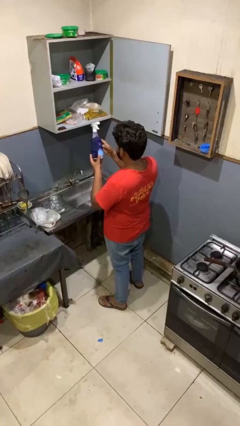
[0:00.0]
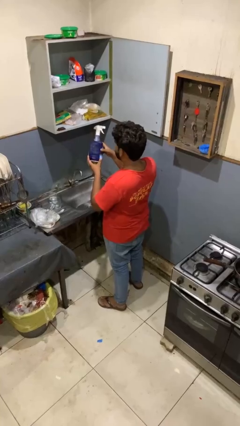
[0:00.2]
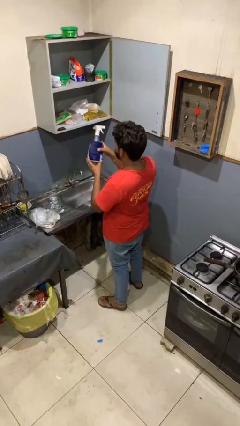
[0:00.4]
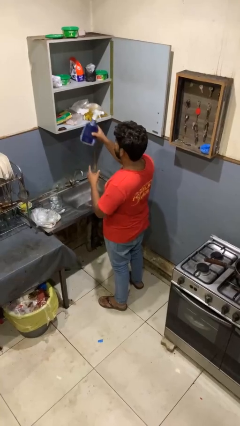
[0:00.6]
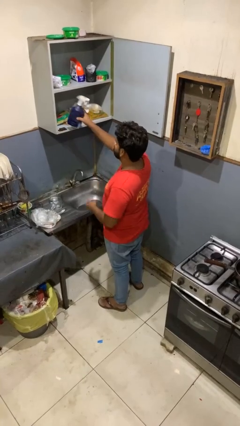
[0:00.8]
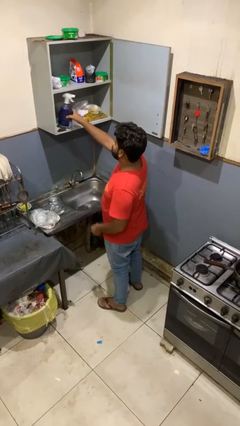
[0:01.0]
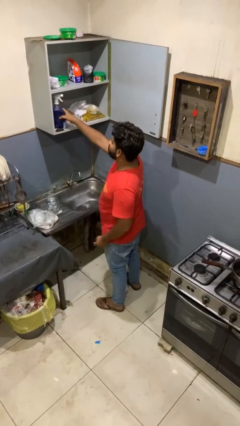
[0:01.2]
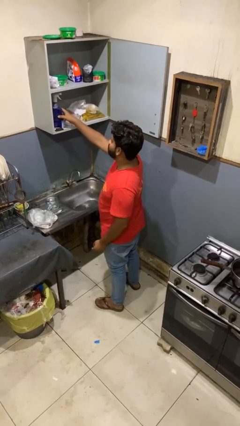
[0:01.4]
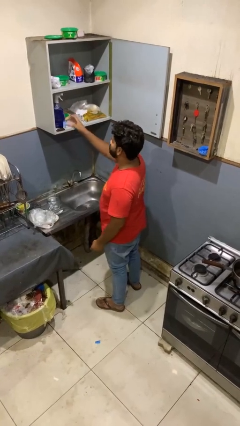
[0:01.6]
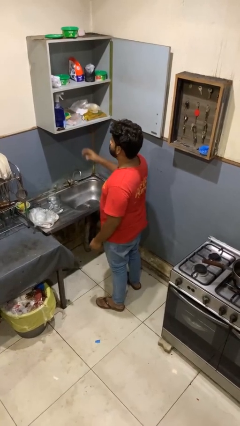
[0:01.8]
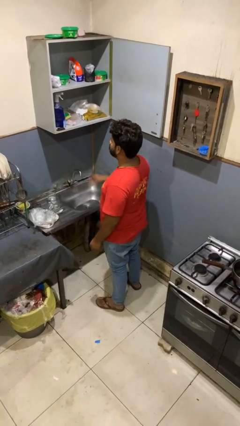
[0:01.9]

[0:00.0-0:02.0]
person puts down object into cabinet

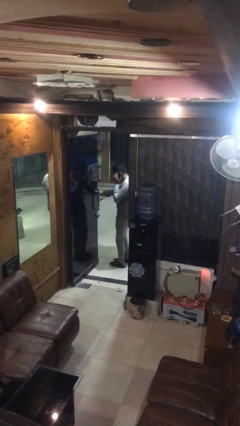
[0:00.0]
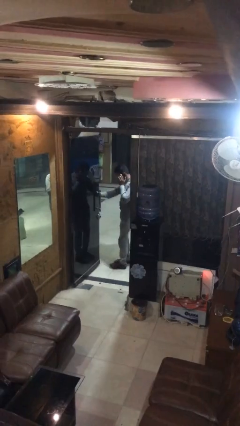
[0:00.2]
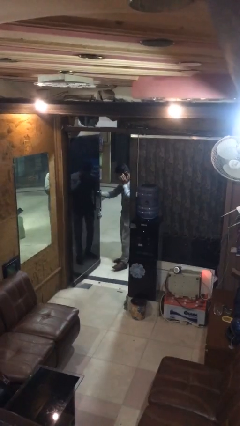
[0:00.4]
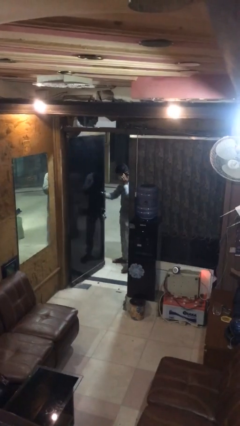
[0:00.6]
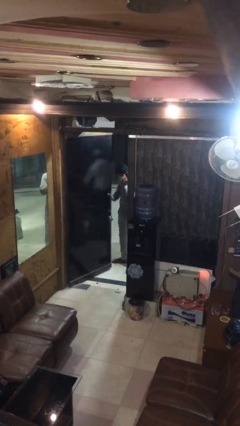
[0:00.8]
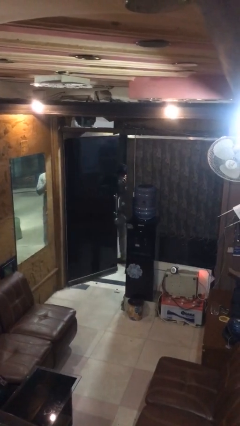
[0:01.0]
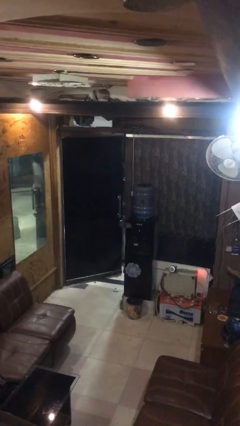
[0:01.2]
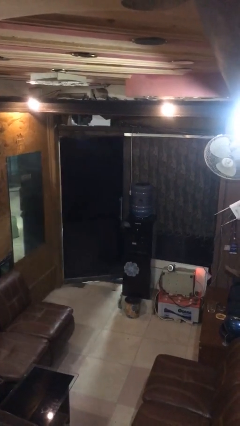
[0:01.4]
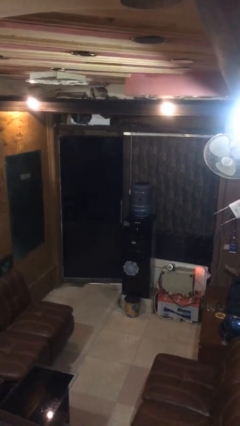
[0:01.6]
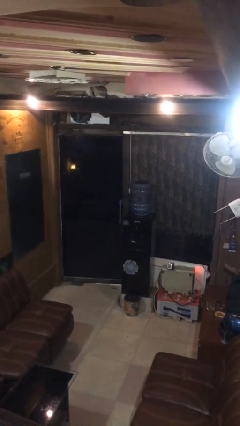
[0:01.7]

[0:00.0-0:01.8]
person closes facility door

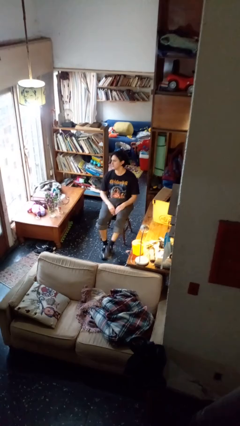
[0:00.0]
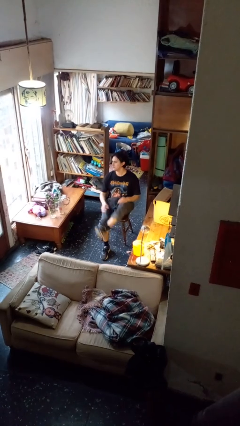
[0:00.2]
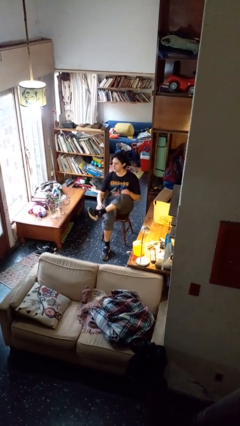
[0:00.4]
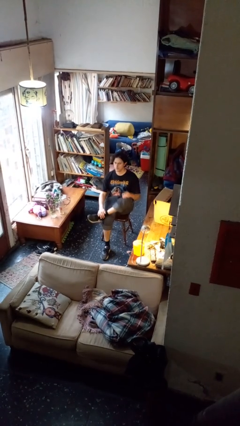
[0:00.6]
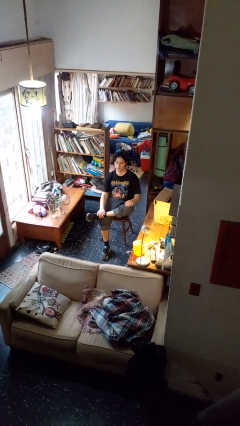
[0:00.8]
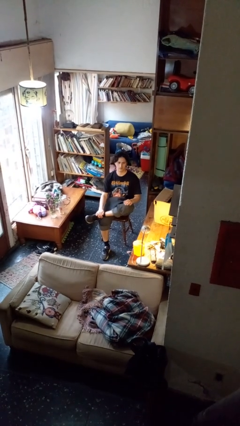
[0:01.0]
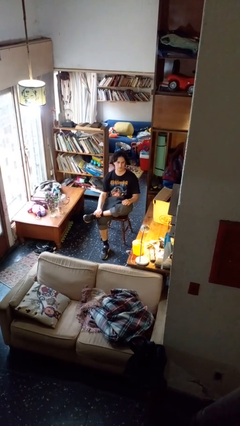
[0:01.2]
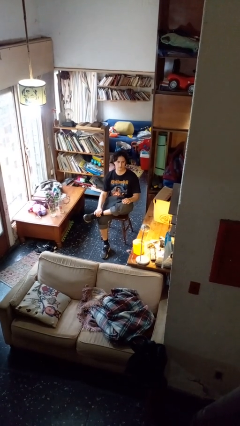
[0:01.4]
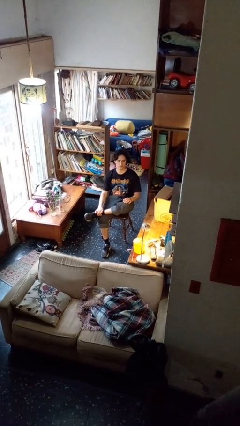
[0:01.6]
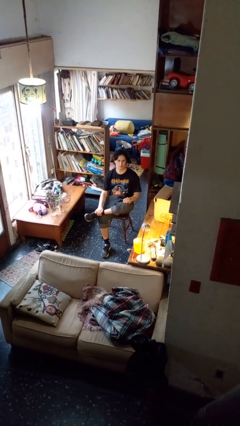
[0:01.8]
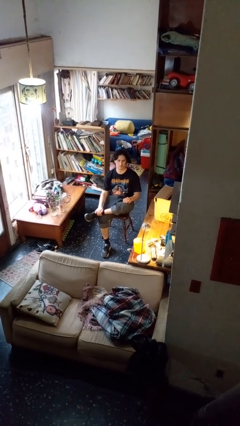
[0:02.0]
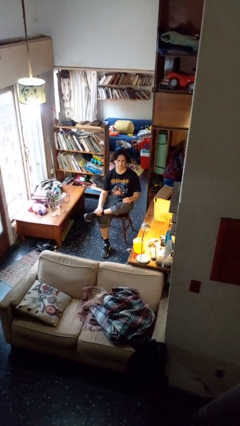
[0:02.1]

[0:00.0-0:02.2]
person crosses legs

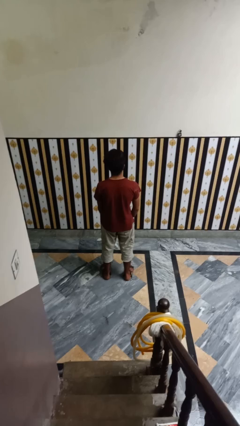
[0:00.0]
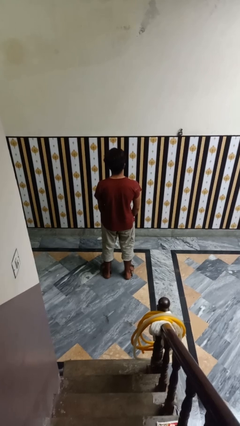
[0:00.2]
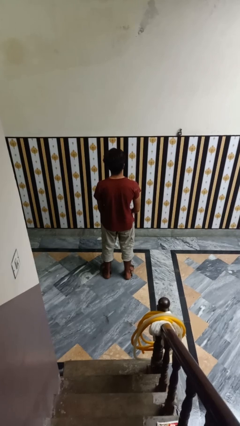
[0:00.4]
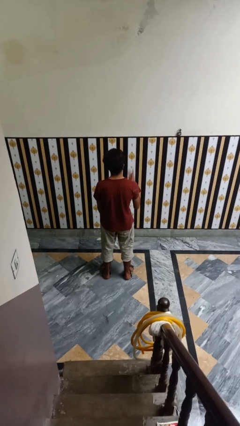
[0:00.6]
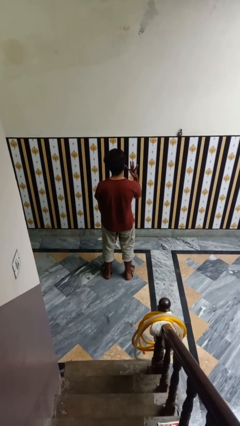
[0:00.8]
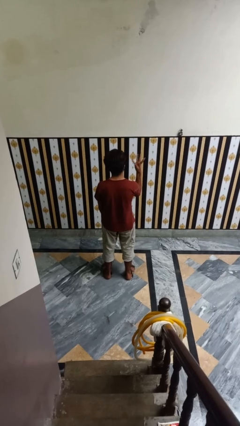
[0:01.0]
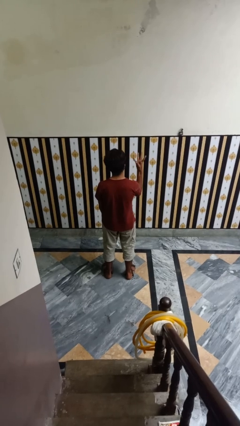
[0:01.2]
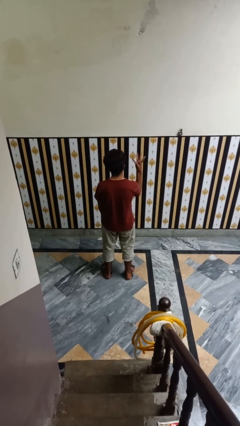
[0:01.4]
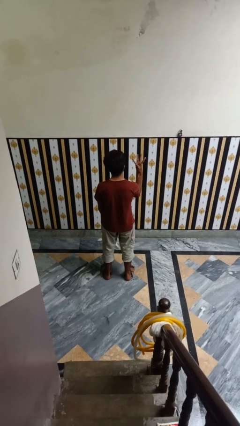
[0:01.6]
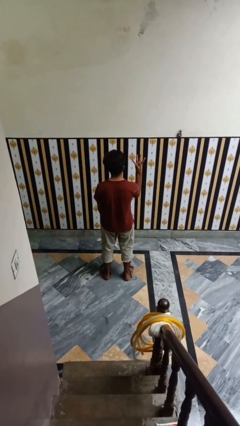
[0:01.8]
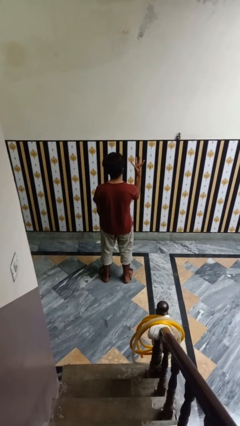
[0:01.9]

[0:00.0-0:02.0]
person gestures number four

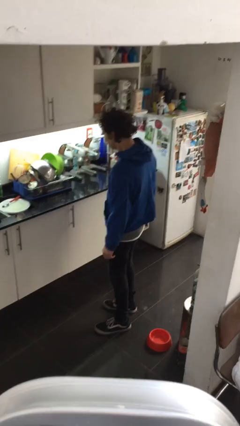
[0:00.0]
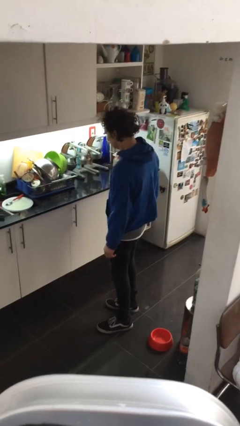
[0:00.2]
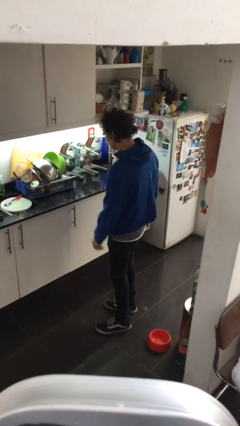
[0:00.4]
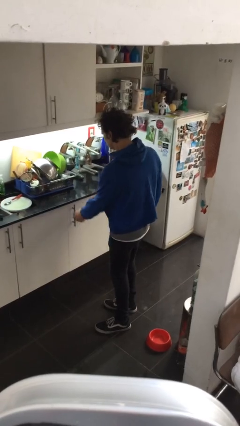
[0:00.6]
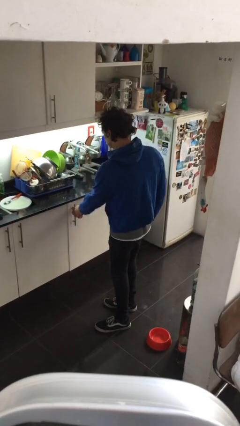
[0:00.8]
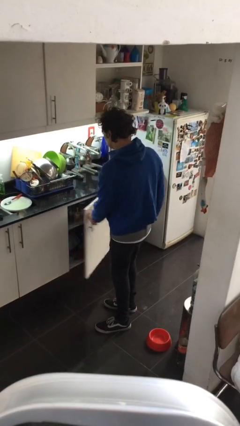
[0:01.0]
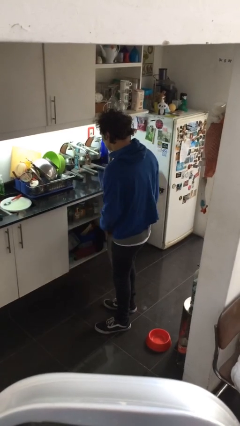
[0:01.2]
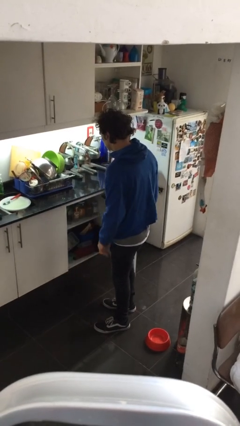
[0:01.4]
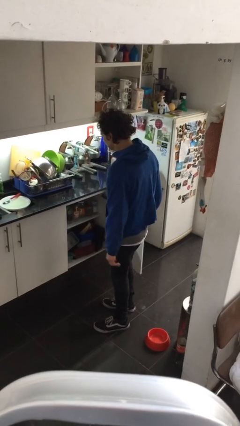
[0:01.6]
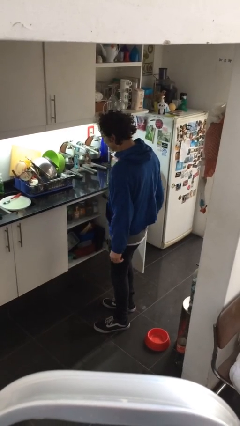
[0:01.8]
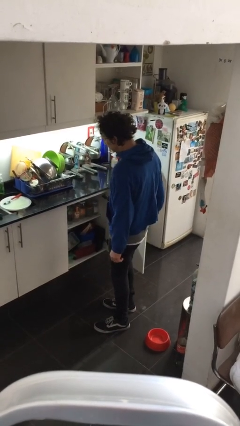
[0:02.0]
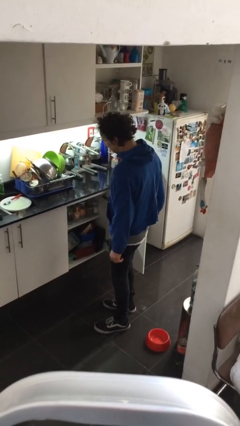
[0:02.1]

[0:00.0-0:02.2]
person opens cabinet

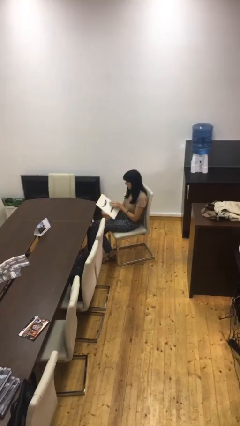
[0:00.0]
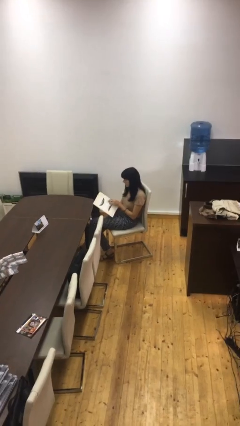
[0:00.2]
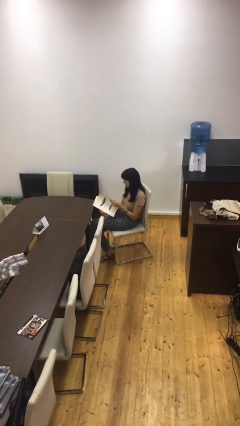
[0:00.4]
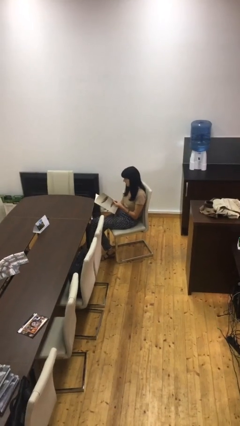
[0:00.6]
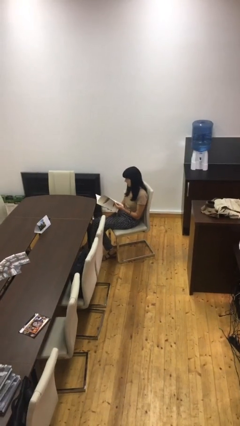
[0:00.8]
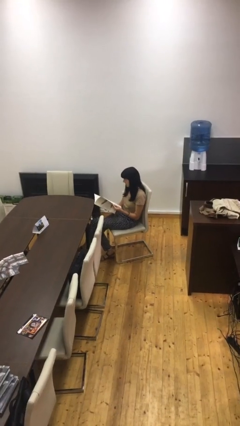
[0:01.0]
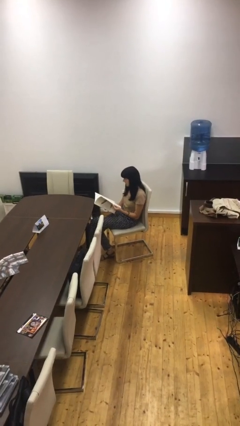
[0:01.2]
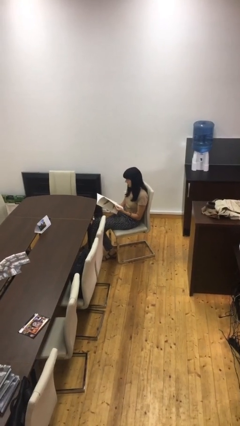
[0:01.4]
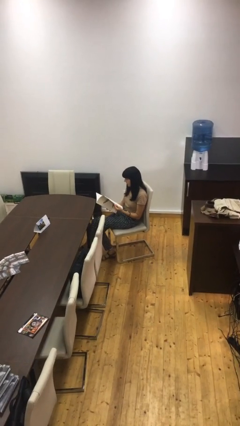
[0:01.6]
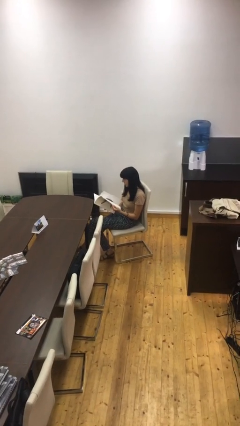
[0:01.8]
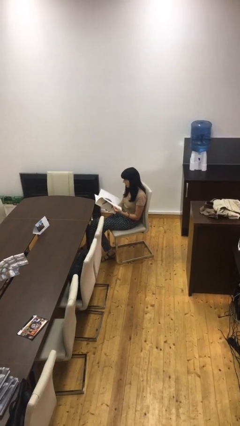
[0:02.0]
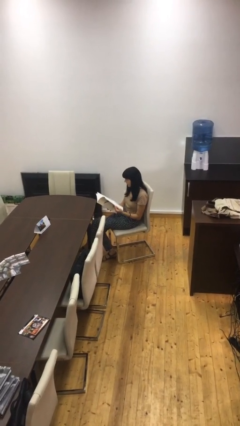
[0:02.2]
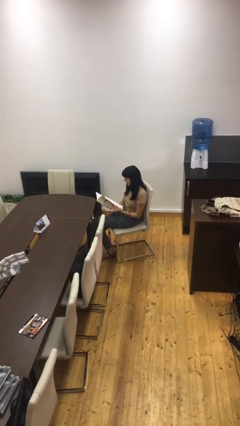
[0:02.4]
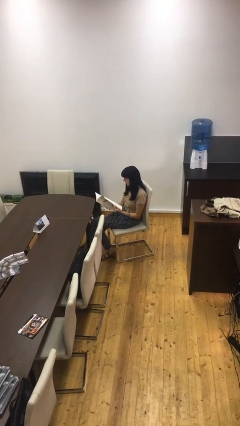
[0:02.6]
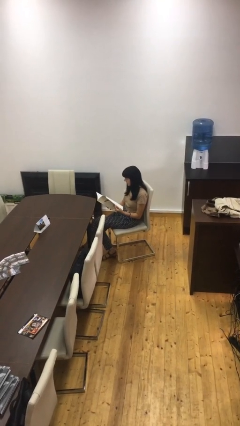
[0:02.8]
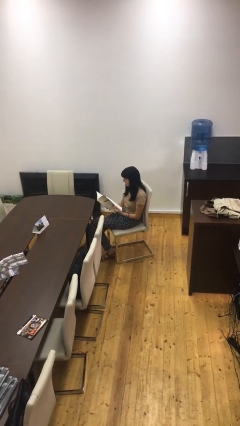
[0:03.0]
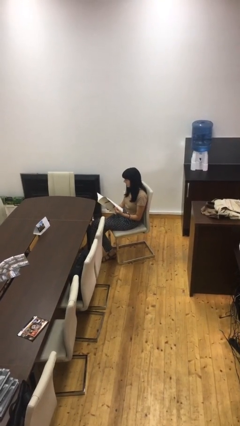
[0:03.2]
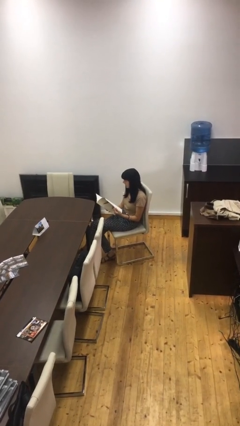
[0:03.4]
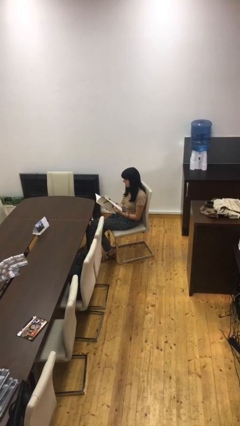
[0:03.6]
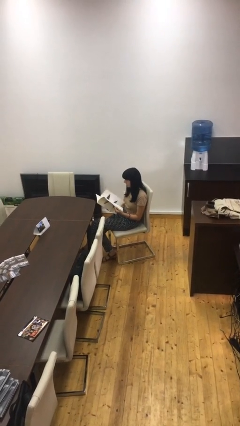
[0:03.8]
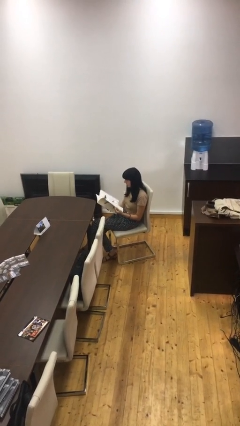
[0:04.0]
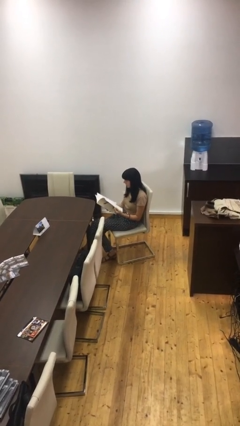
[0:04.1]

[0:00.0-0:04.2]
person reads document

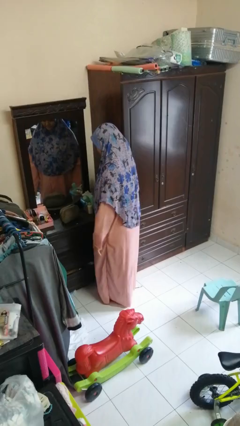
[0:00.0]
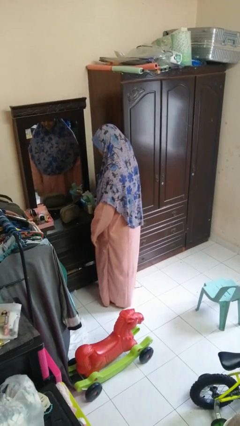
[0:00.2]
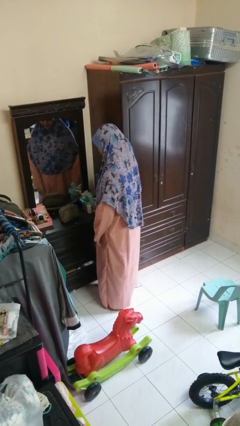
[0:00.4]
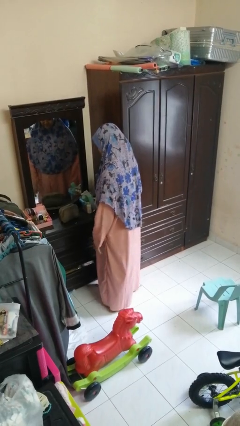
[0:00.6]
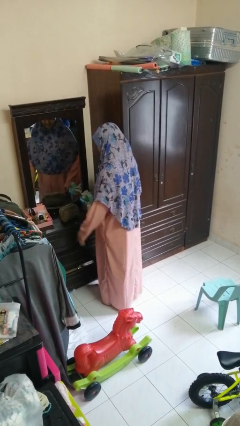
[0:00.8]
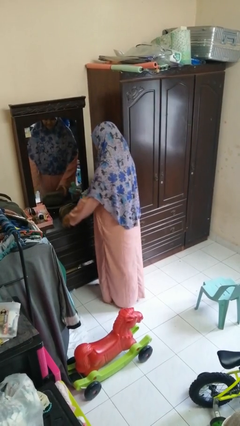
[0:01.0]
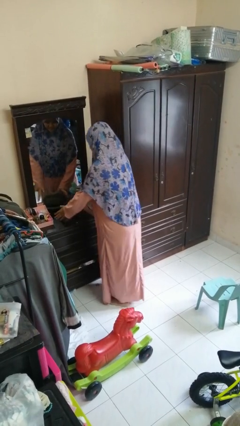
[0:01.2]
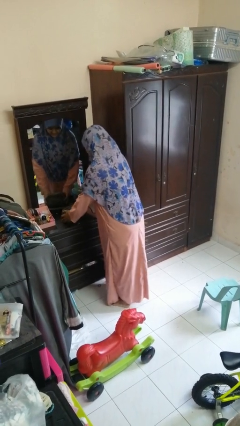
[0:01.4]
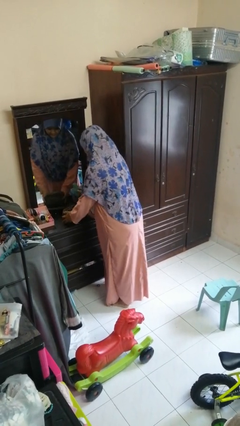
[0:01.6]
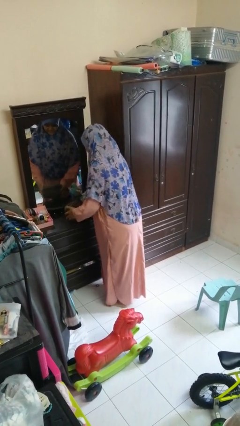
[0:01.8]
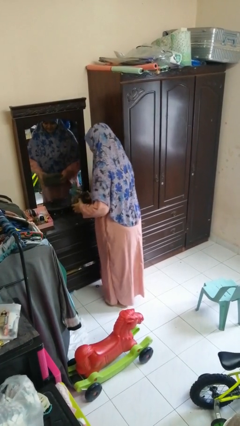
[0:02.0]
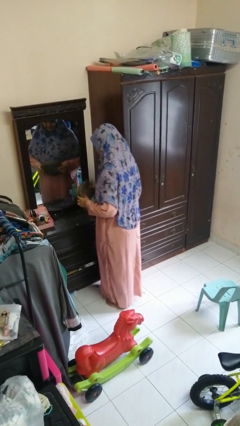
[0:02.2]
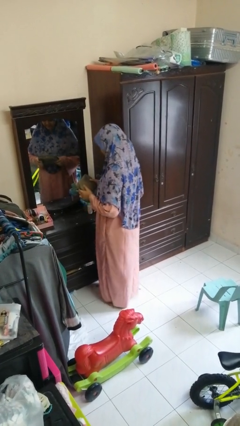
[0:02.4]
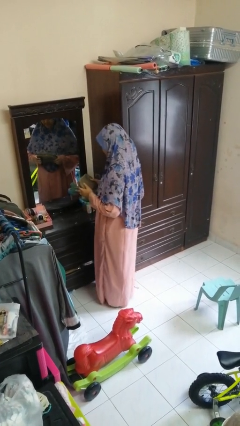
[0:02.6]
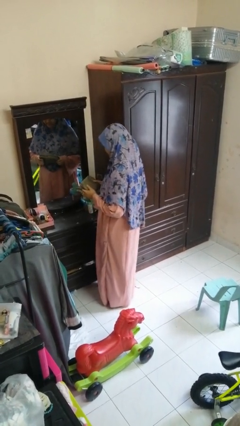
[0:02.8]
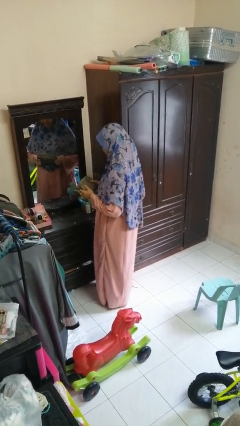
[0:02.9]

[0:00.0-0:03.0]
person picks up object from countertop

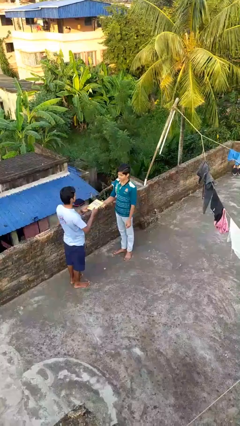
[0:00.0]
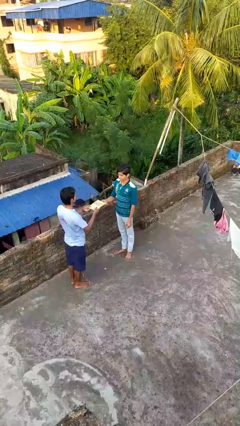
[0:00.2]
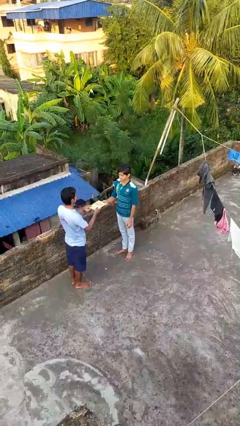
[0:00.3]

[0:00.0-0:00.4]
person transfers object to person
